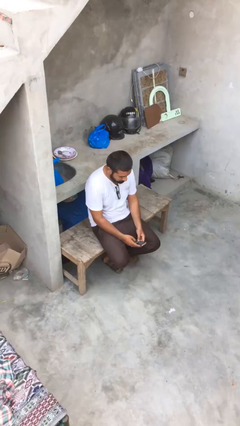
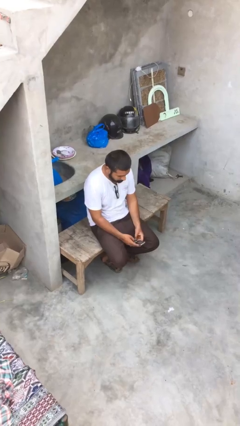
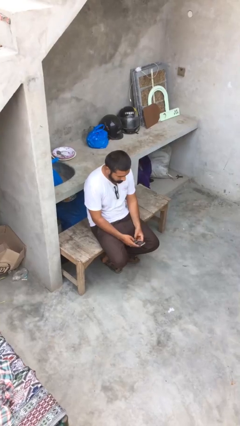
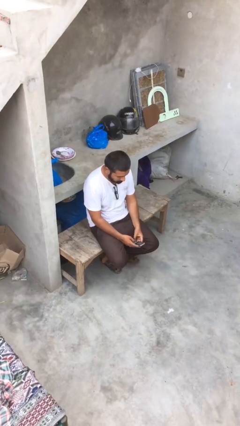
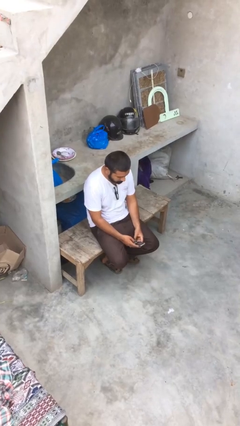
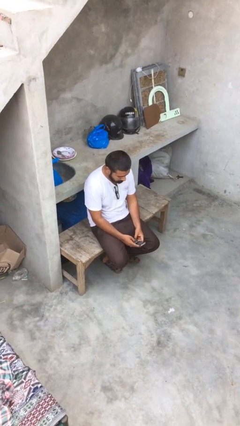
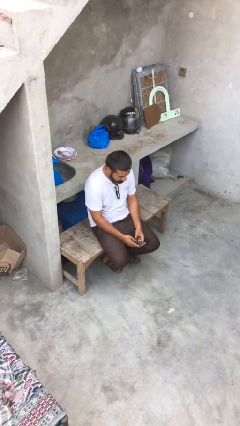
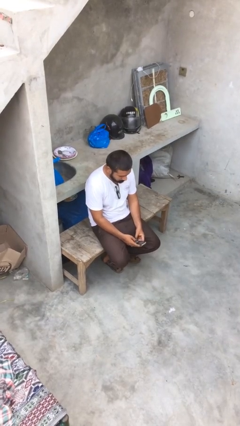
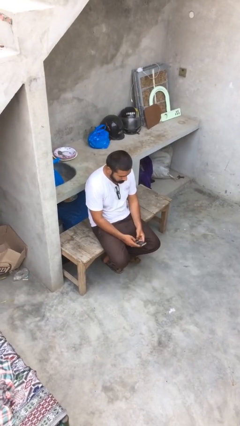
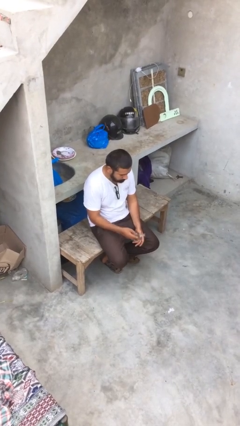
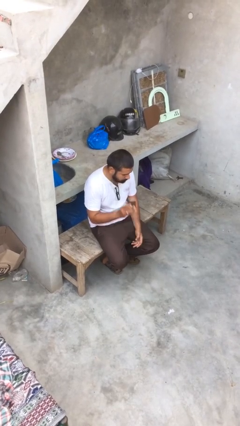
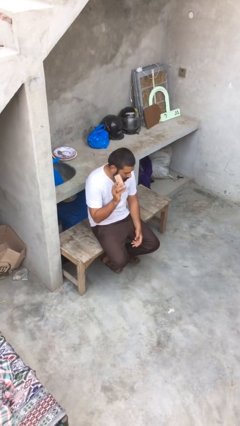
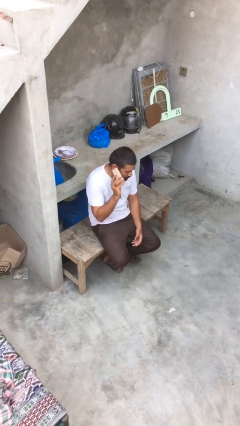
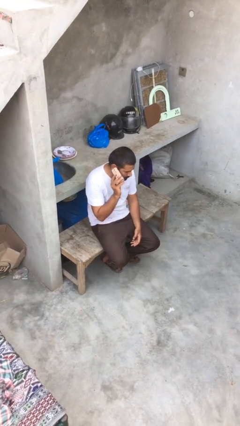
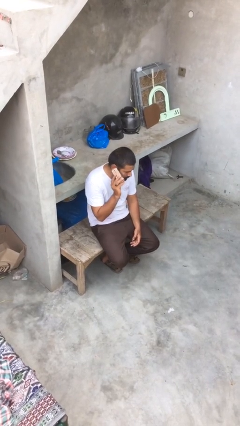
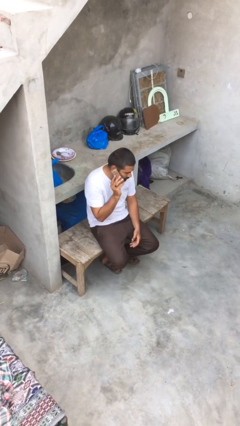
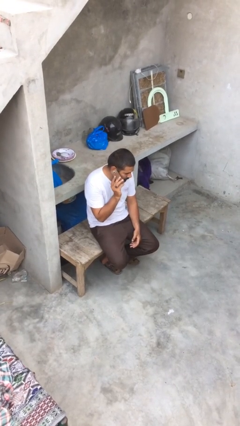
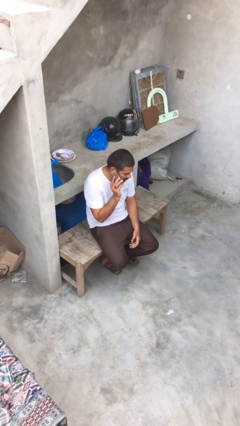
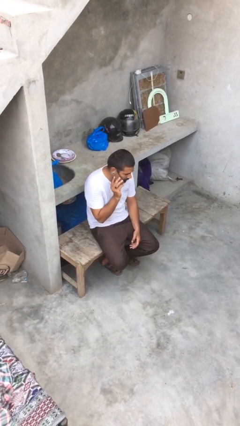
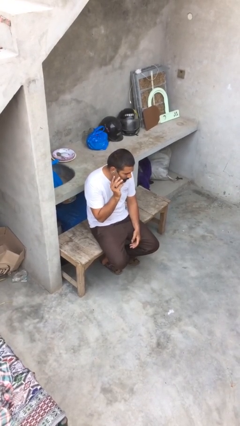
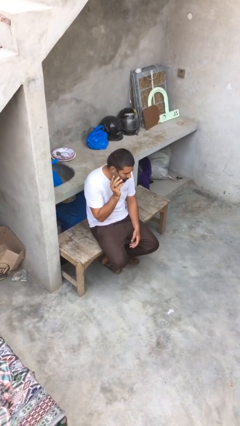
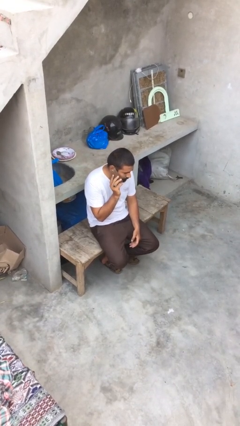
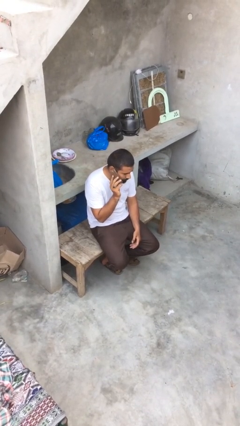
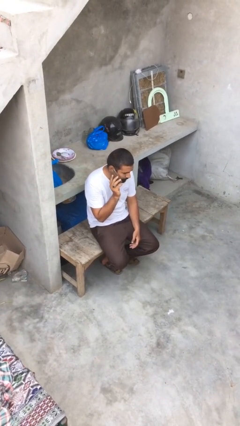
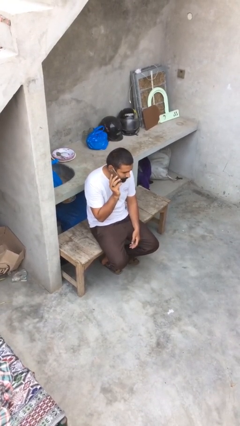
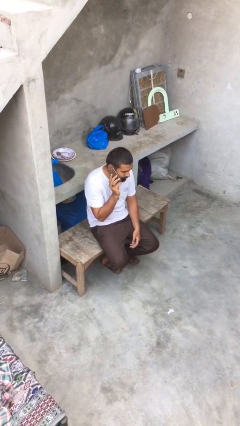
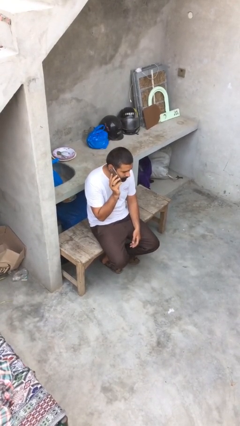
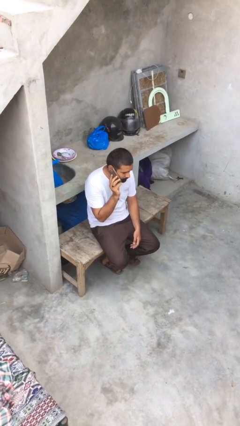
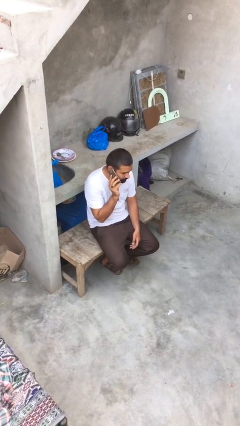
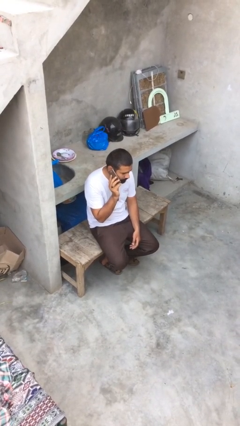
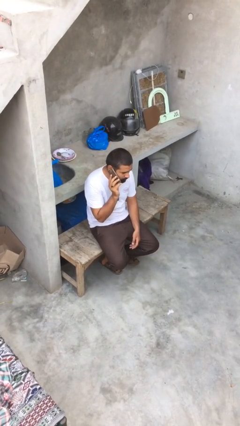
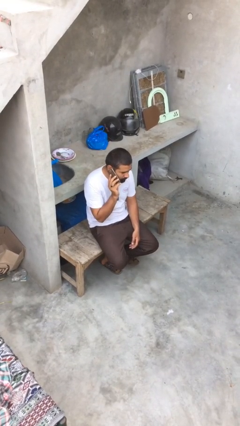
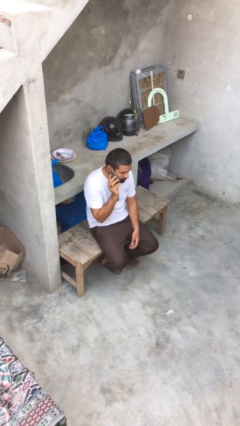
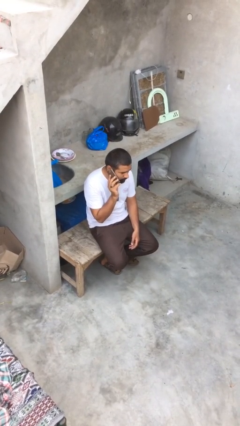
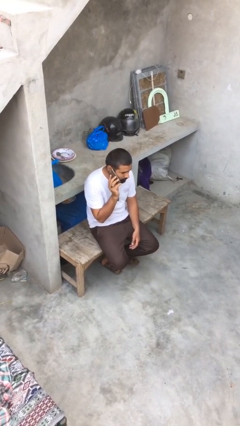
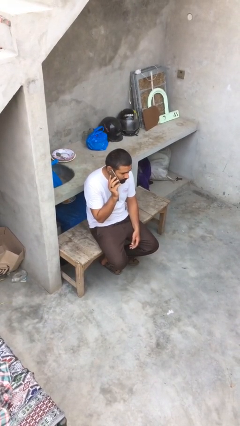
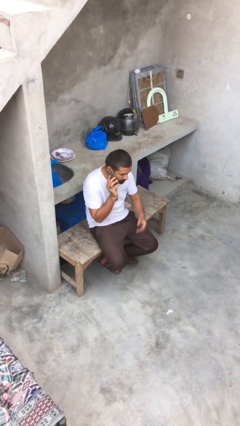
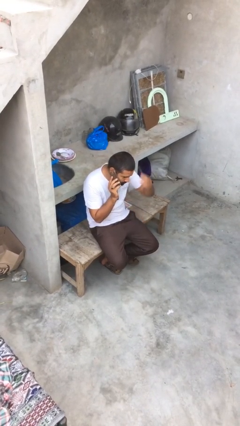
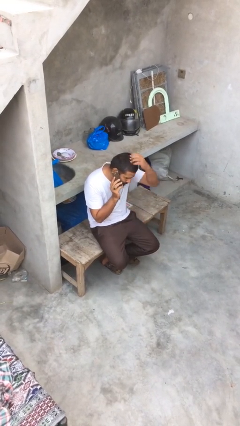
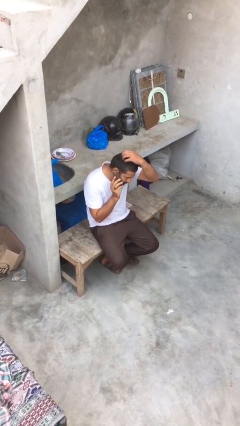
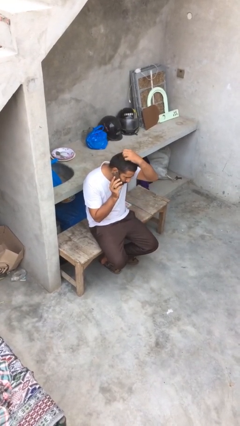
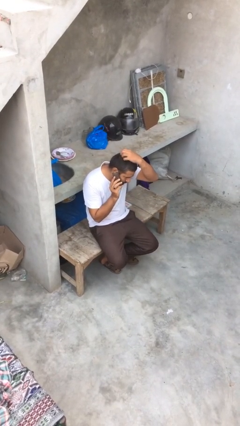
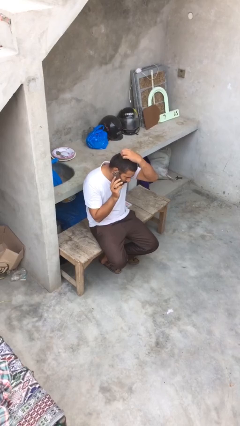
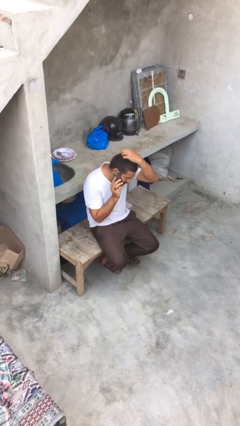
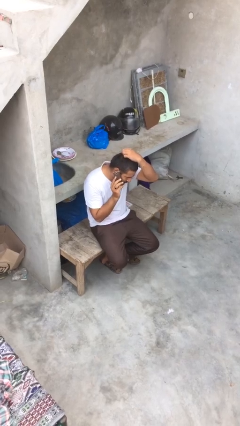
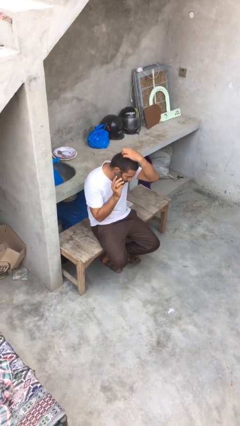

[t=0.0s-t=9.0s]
person talks on phone

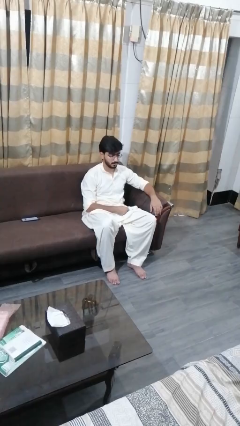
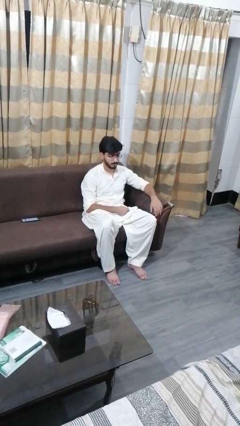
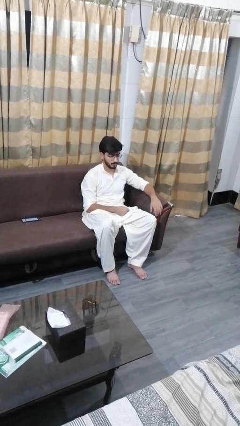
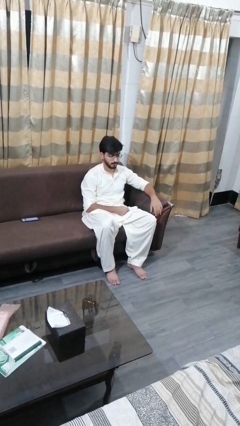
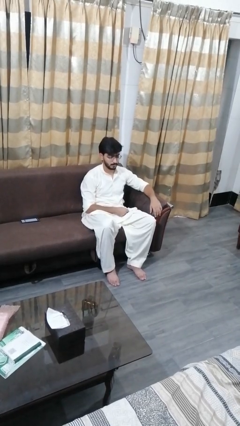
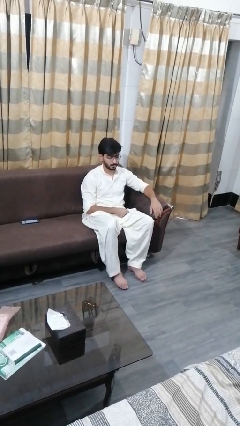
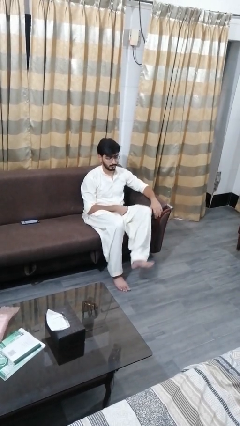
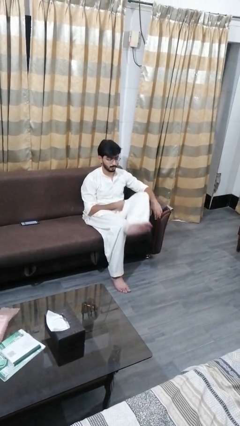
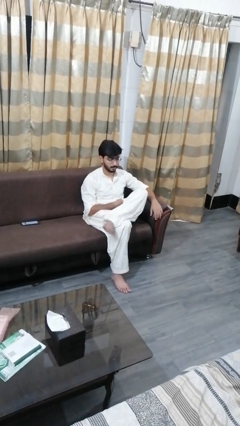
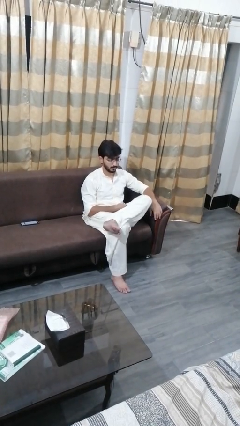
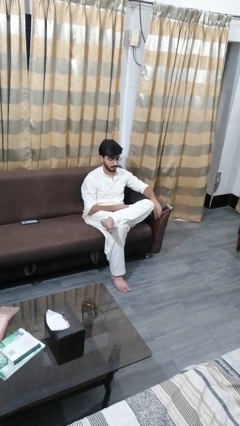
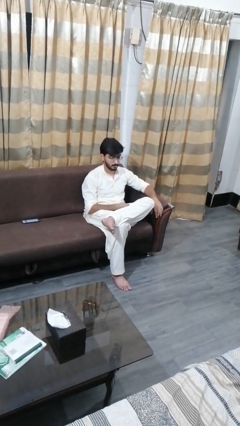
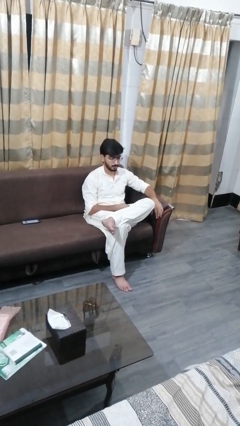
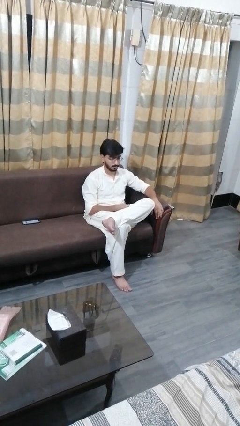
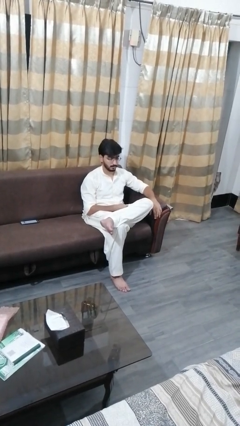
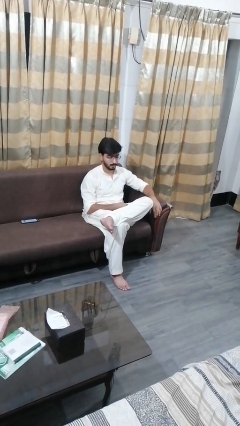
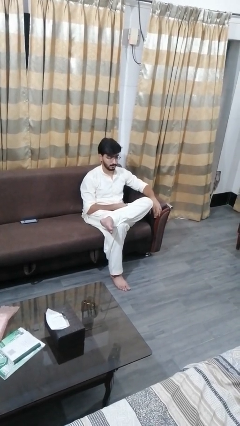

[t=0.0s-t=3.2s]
person crosses legs

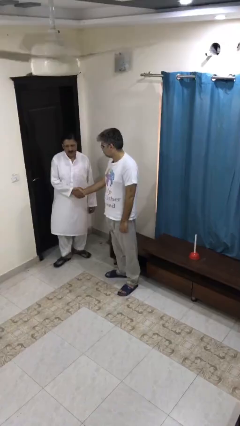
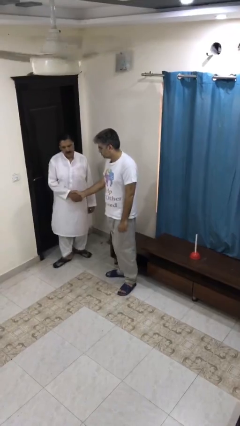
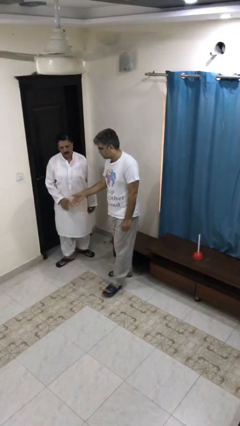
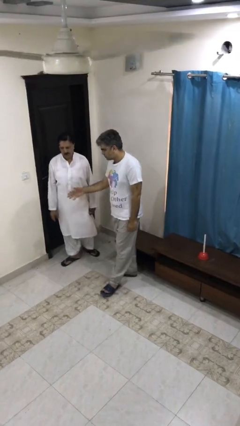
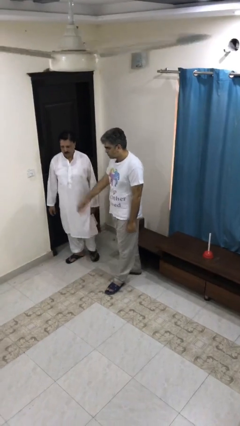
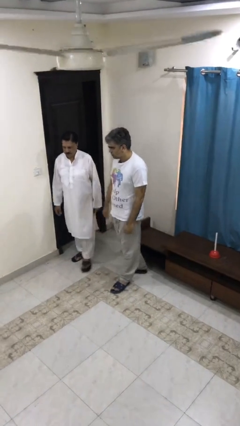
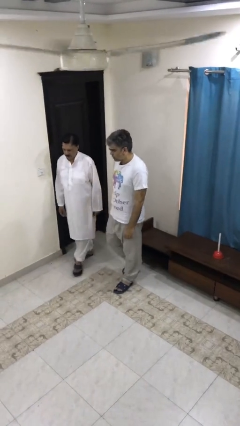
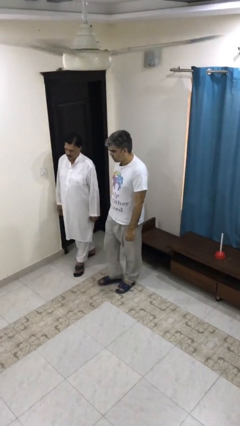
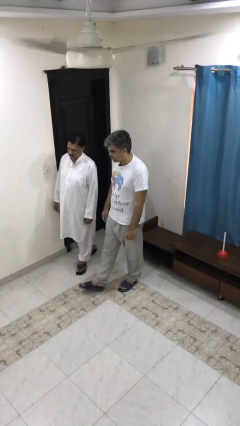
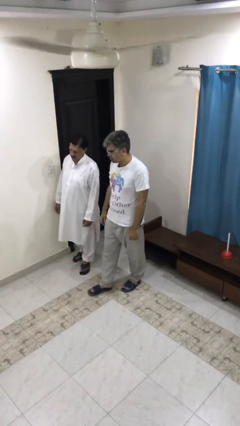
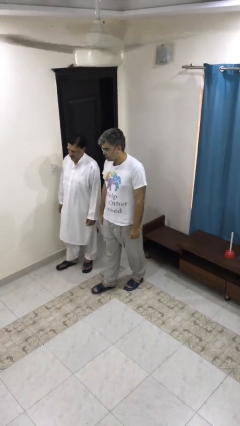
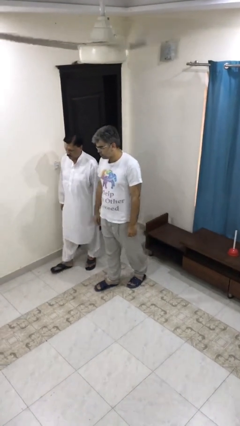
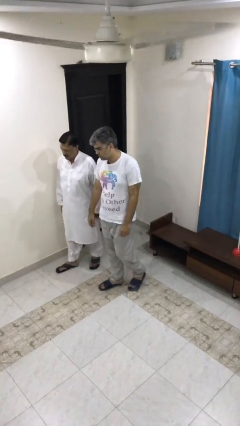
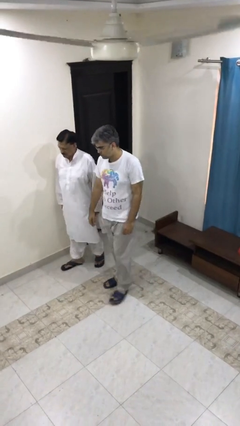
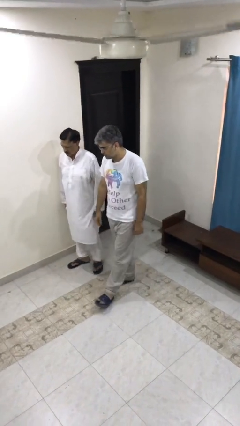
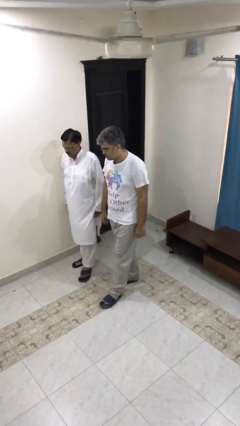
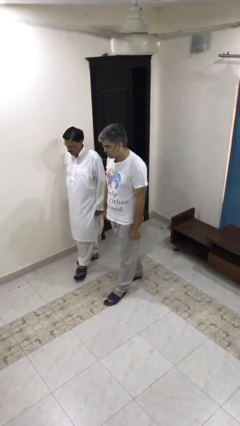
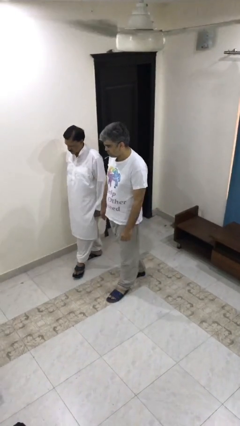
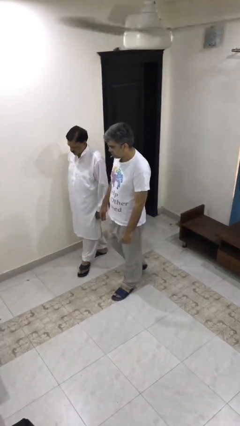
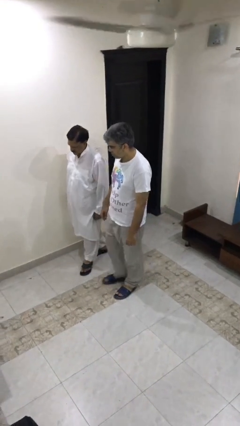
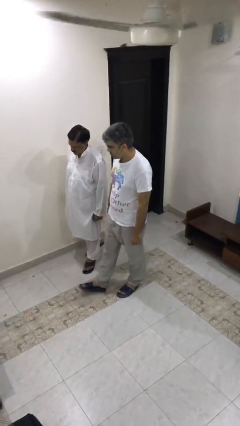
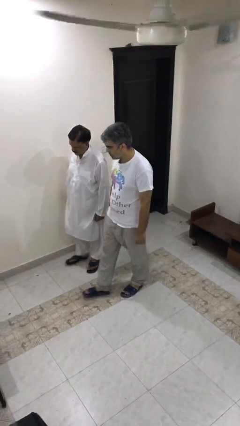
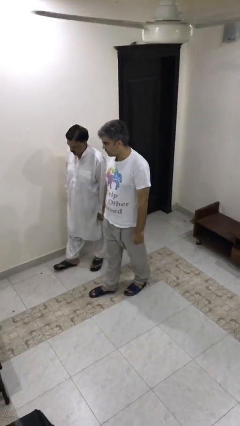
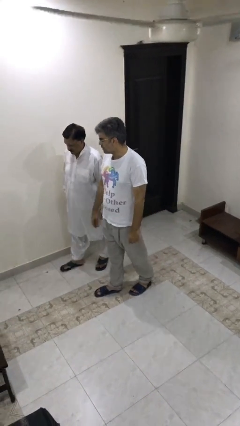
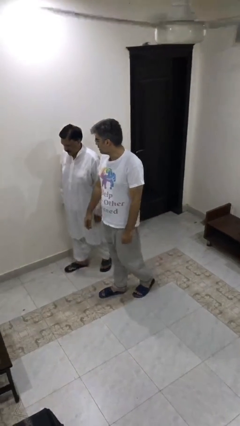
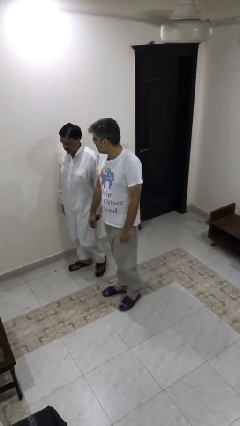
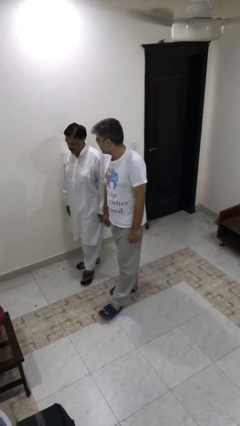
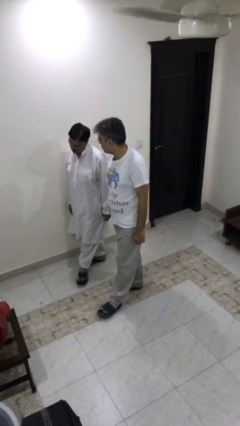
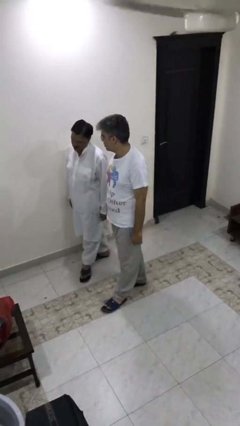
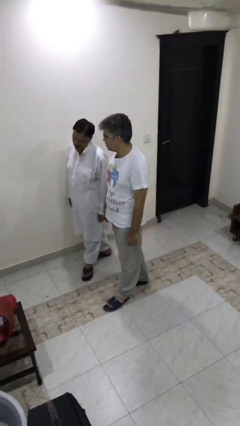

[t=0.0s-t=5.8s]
person talks to person
